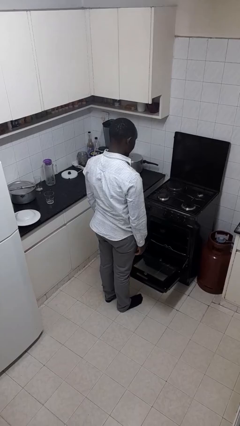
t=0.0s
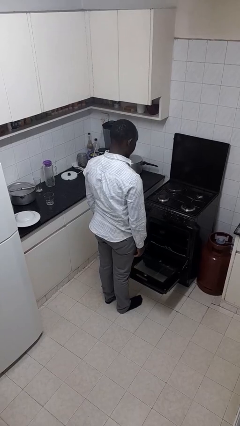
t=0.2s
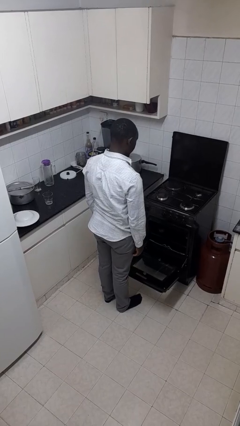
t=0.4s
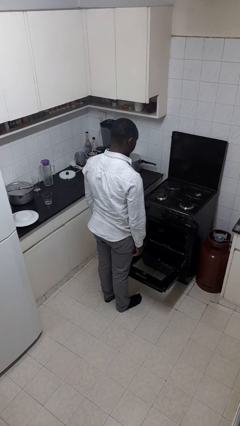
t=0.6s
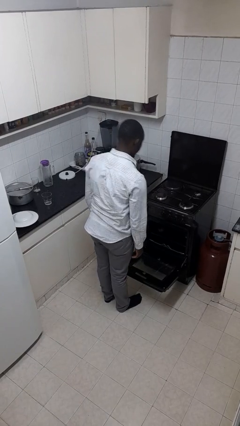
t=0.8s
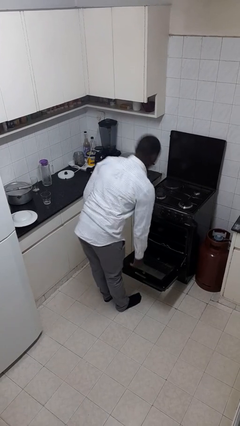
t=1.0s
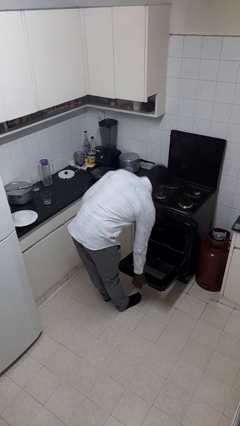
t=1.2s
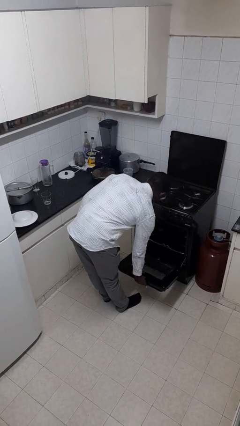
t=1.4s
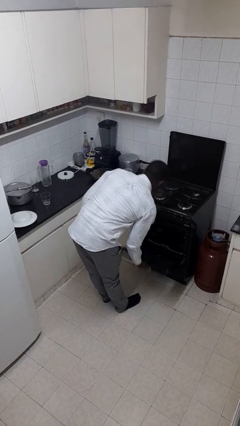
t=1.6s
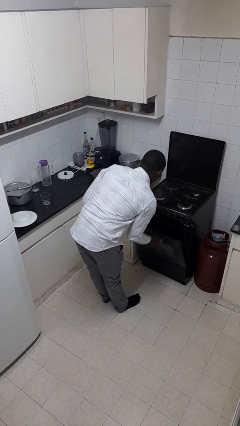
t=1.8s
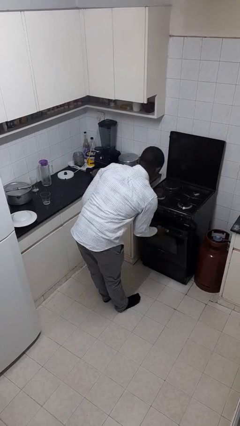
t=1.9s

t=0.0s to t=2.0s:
person closes oven door

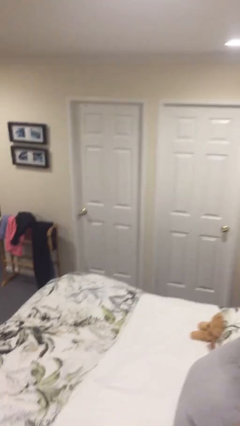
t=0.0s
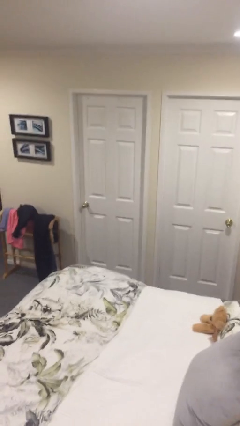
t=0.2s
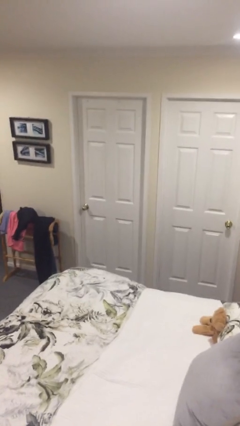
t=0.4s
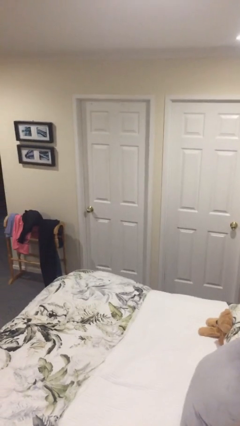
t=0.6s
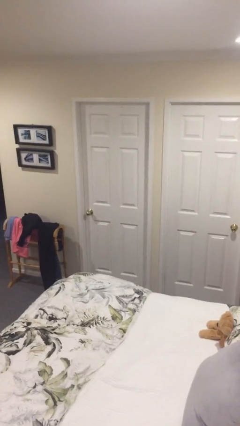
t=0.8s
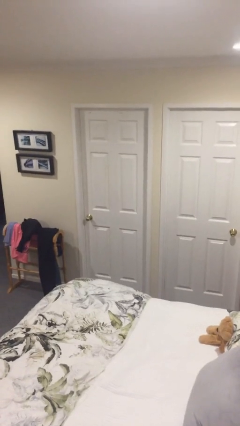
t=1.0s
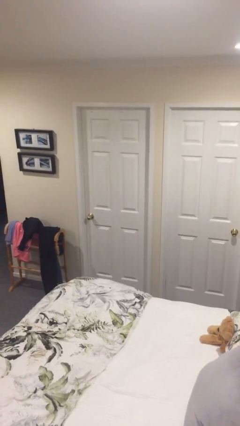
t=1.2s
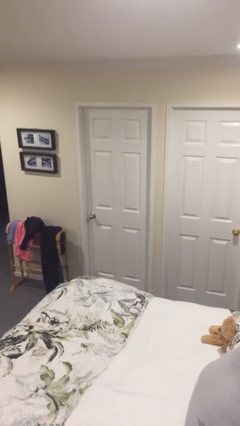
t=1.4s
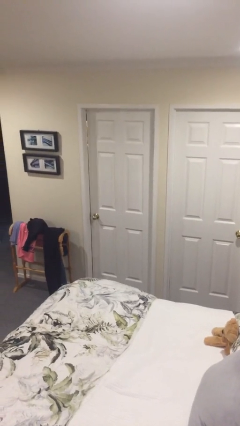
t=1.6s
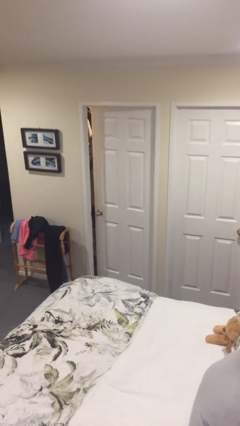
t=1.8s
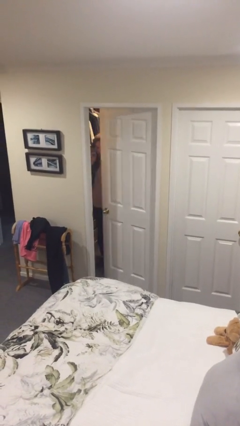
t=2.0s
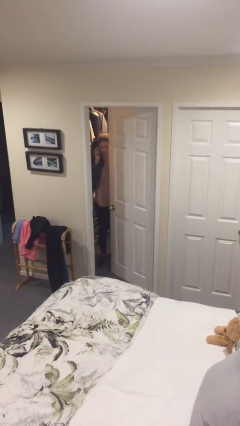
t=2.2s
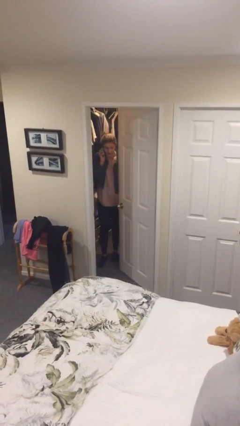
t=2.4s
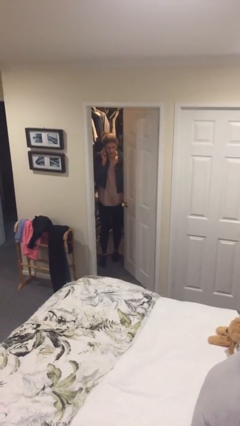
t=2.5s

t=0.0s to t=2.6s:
person opens facility door

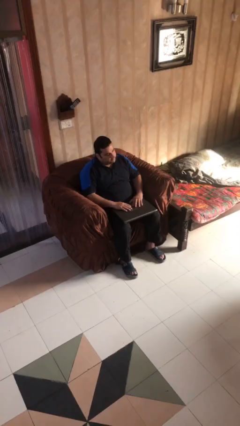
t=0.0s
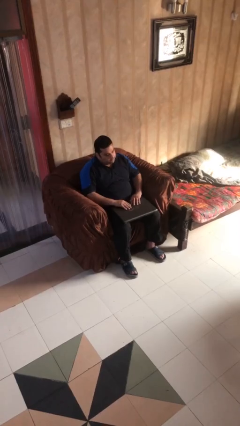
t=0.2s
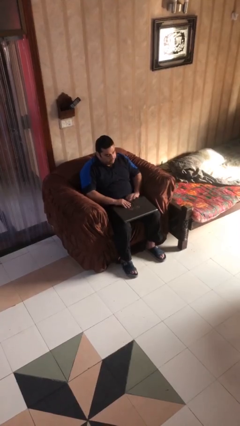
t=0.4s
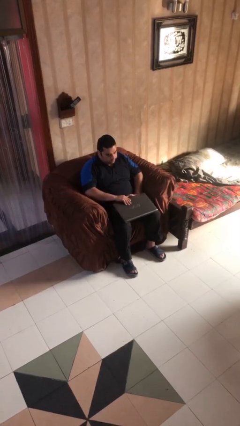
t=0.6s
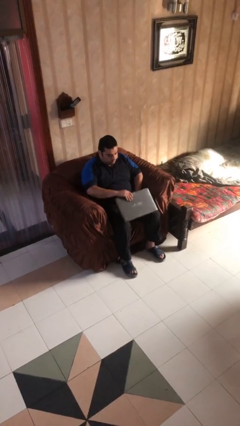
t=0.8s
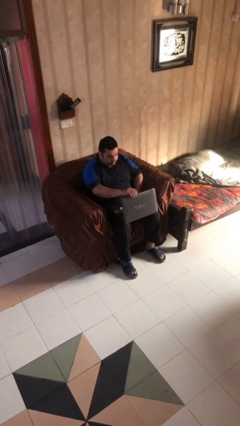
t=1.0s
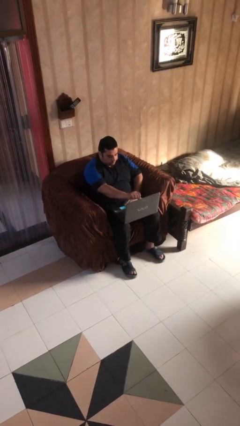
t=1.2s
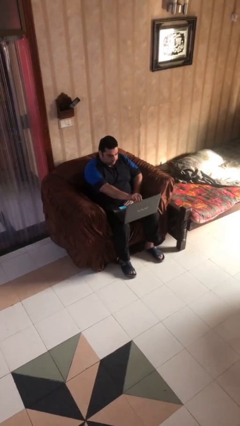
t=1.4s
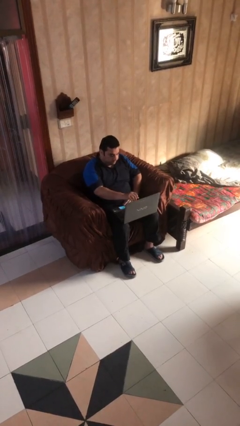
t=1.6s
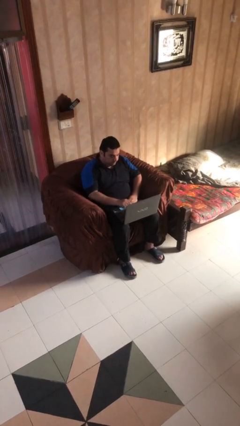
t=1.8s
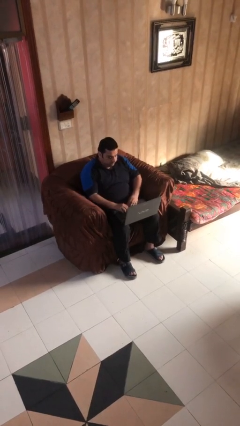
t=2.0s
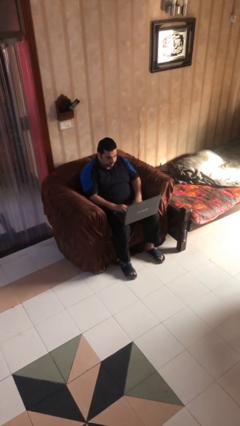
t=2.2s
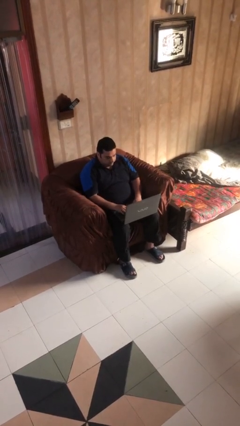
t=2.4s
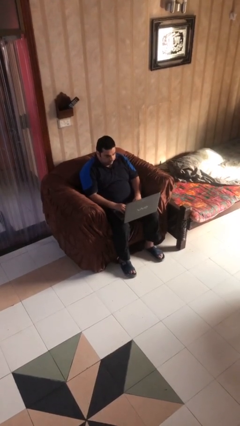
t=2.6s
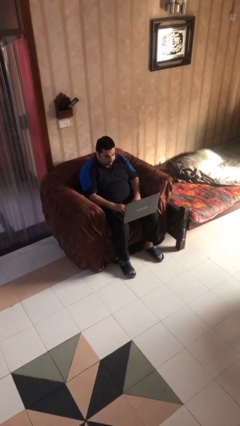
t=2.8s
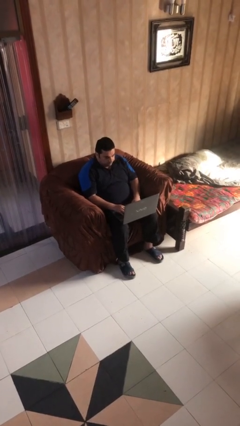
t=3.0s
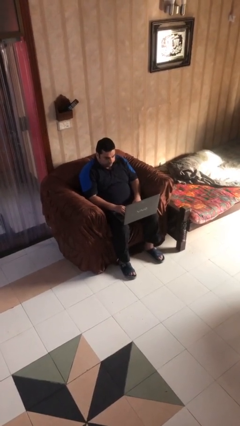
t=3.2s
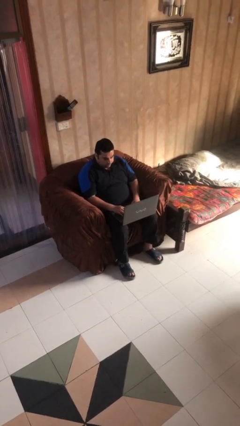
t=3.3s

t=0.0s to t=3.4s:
person opens laptop

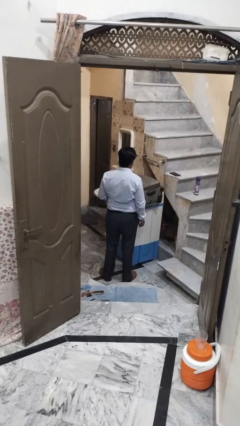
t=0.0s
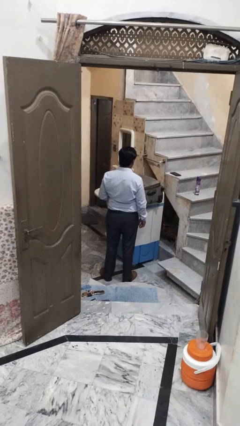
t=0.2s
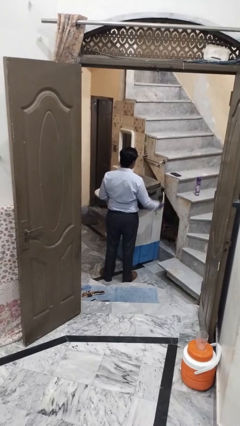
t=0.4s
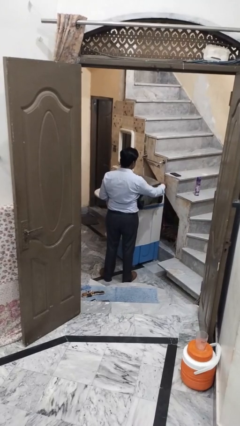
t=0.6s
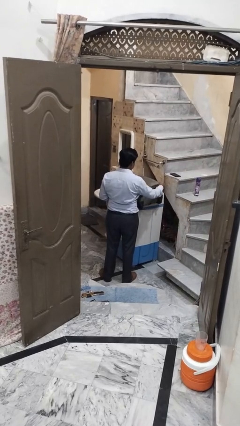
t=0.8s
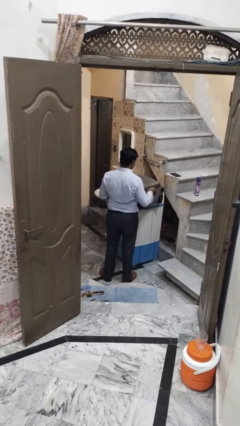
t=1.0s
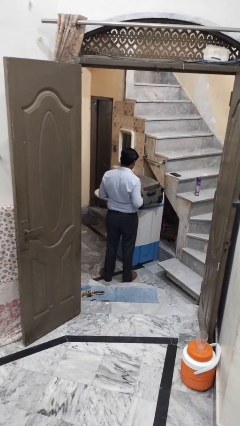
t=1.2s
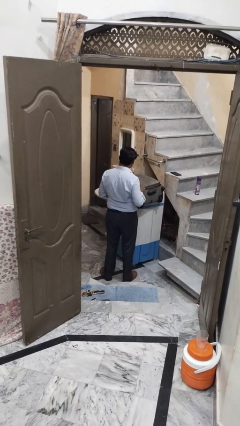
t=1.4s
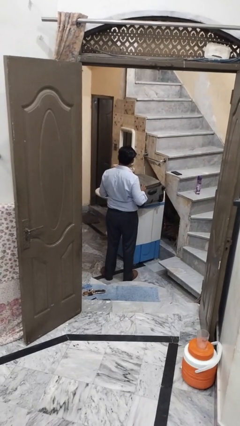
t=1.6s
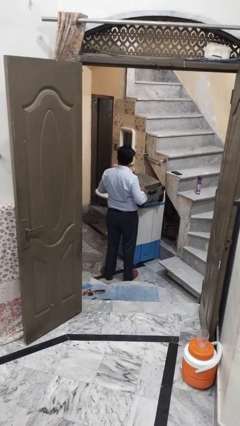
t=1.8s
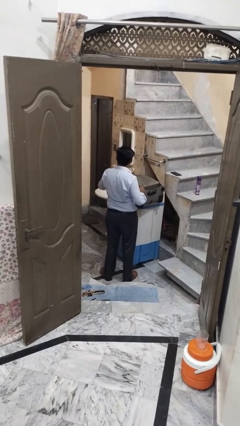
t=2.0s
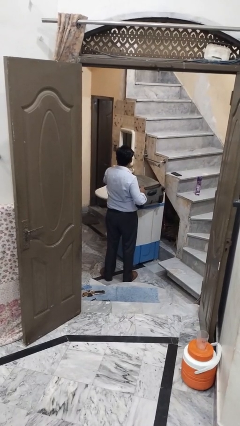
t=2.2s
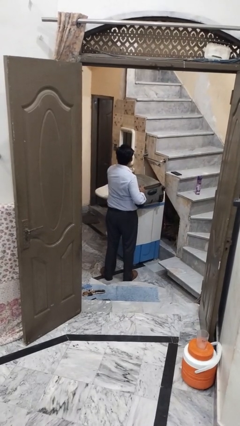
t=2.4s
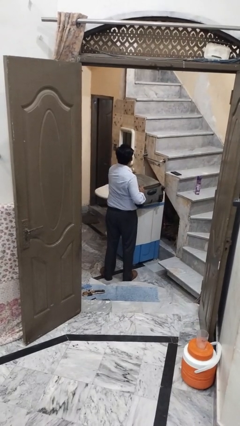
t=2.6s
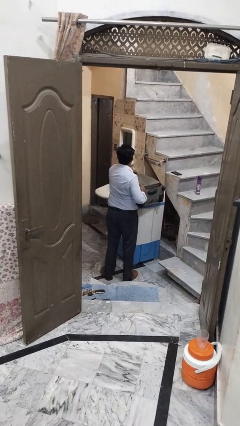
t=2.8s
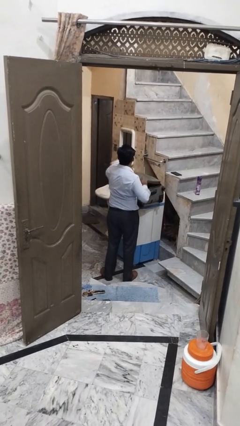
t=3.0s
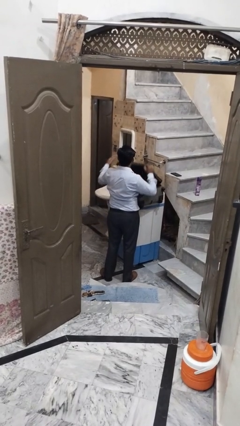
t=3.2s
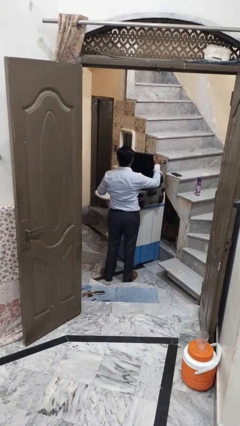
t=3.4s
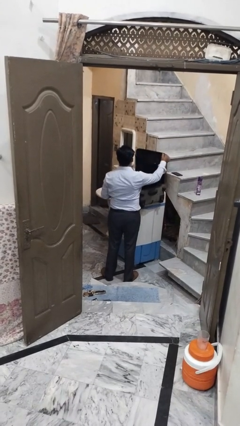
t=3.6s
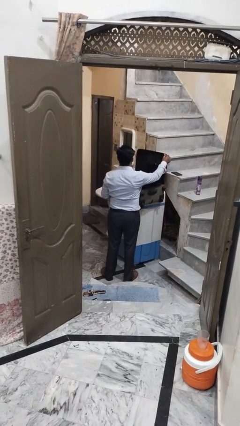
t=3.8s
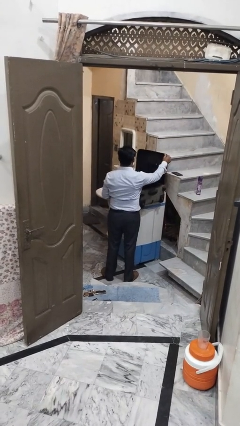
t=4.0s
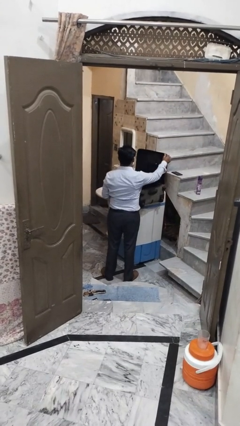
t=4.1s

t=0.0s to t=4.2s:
person opens suitcase

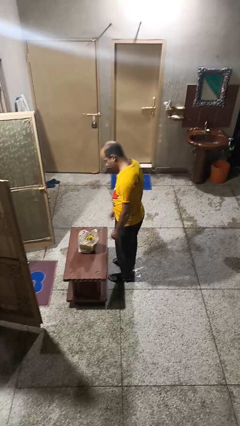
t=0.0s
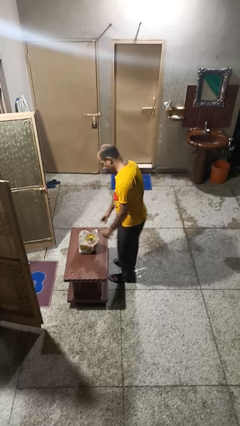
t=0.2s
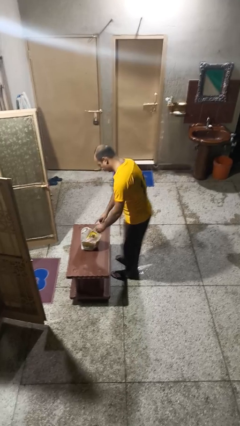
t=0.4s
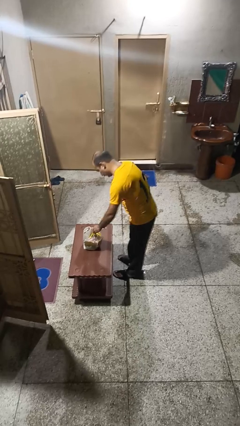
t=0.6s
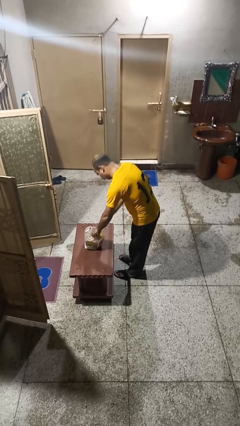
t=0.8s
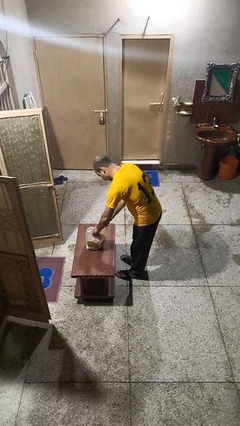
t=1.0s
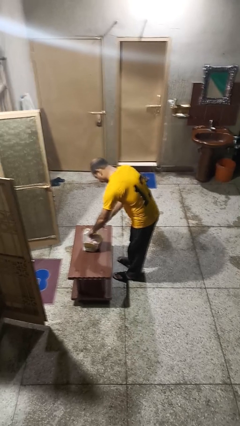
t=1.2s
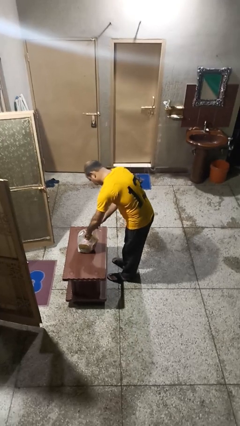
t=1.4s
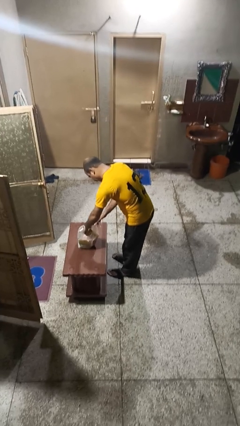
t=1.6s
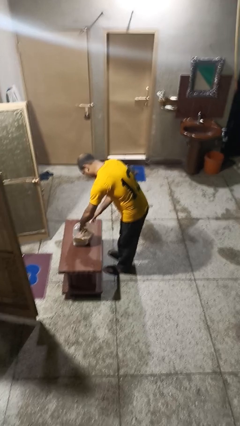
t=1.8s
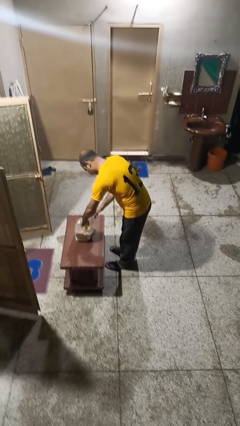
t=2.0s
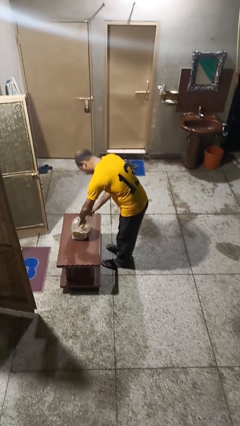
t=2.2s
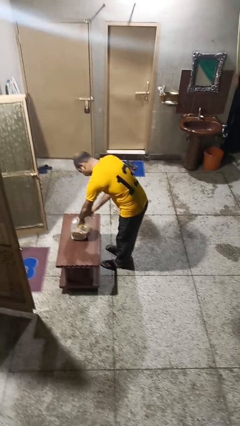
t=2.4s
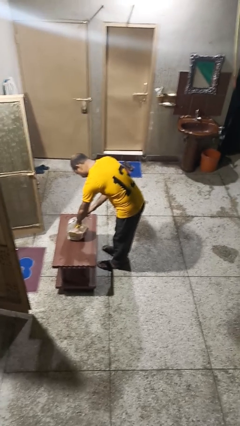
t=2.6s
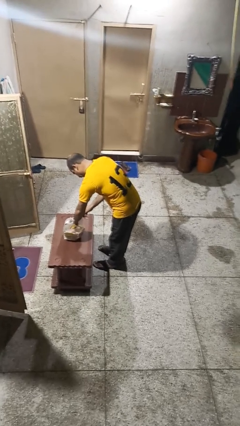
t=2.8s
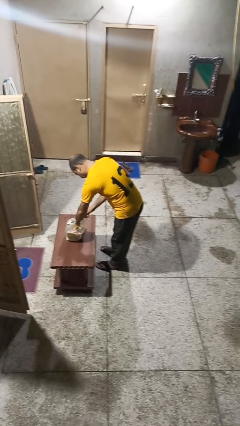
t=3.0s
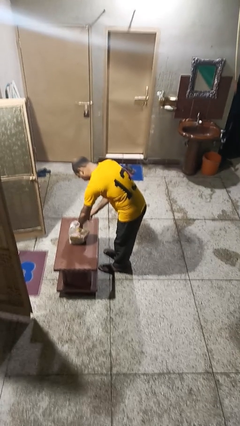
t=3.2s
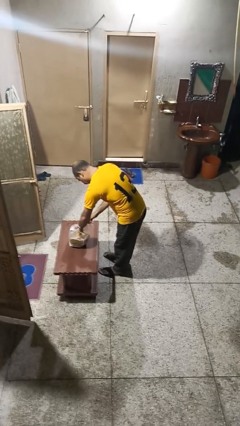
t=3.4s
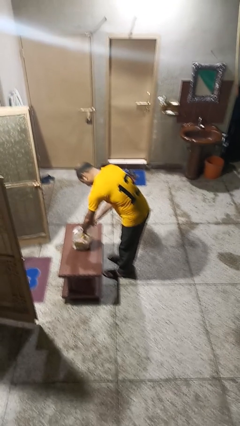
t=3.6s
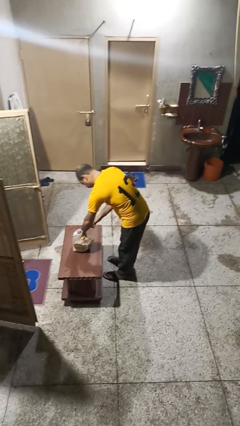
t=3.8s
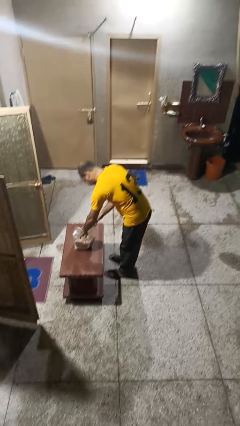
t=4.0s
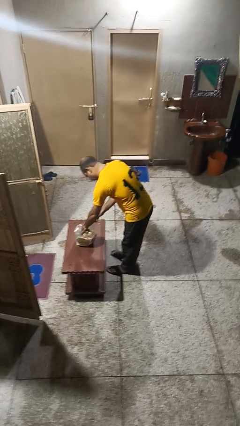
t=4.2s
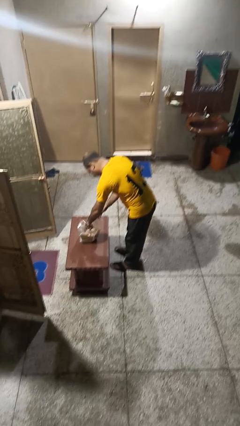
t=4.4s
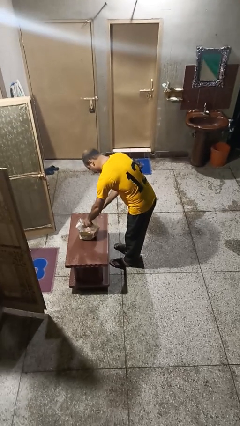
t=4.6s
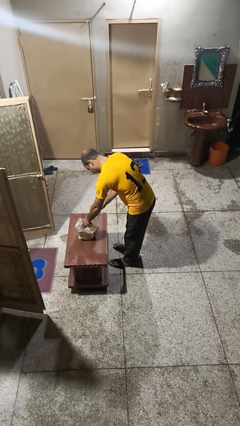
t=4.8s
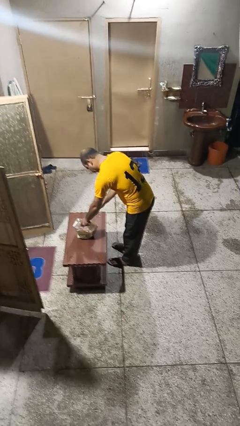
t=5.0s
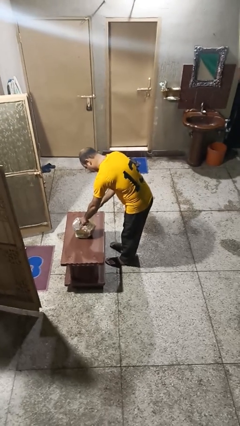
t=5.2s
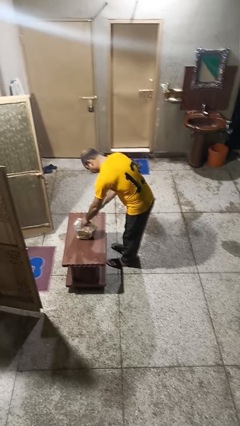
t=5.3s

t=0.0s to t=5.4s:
person searches in bag
